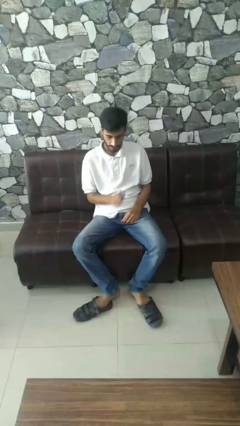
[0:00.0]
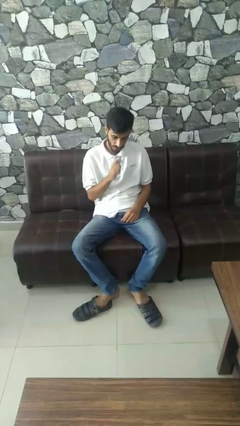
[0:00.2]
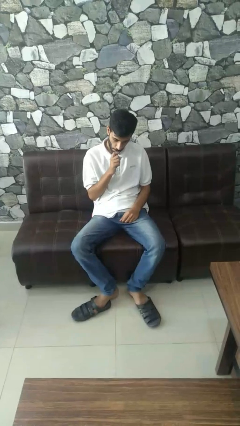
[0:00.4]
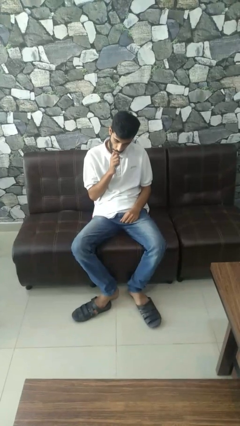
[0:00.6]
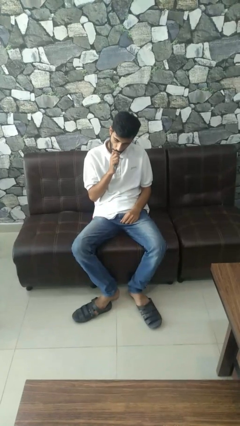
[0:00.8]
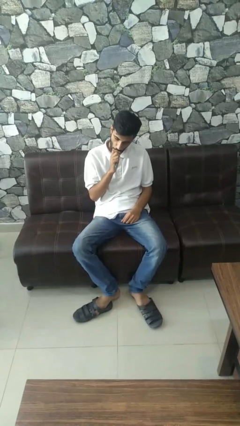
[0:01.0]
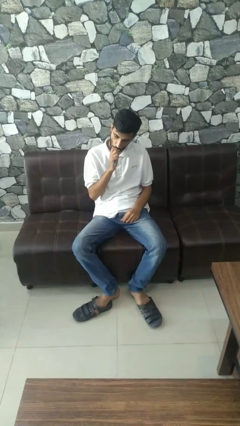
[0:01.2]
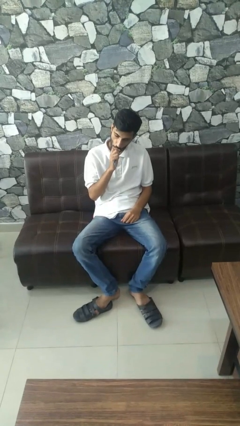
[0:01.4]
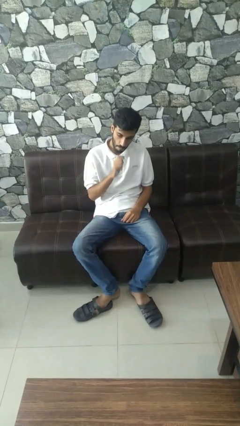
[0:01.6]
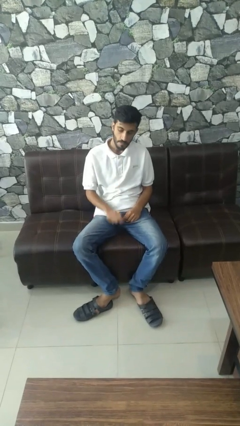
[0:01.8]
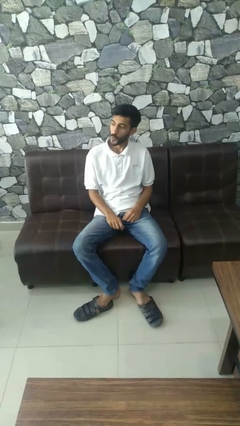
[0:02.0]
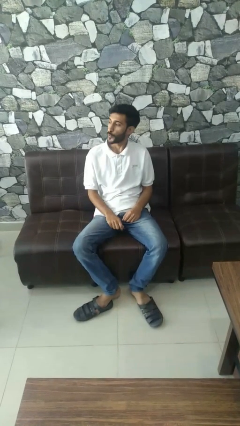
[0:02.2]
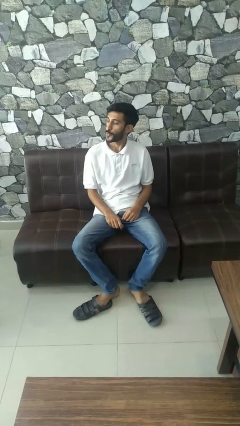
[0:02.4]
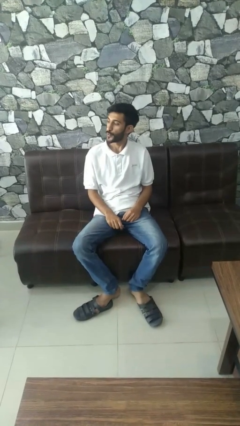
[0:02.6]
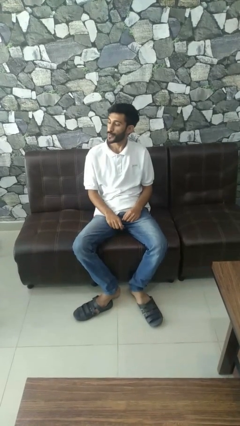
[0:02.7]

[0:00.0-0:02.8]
person vapes

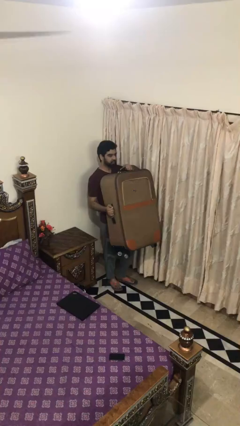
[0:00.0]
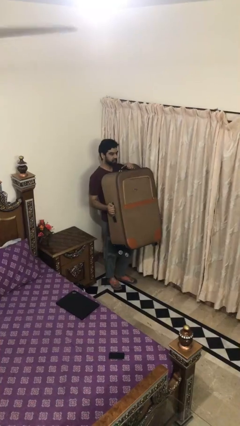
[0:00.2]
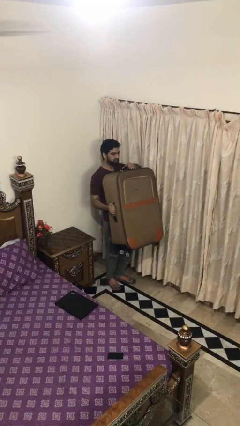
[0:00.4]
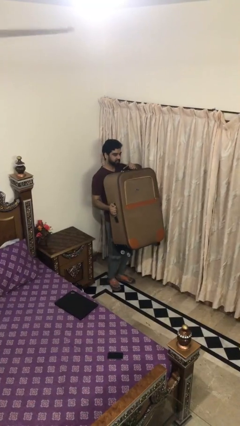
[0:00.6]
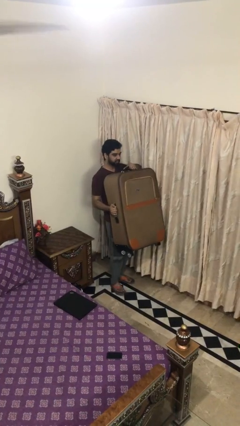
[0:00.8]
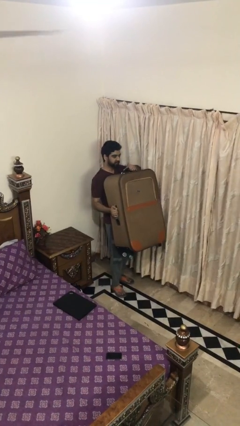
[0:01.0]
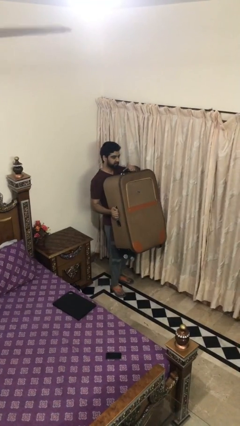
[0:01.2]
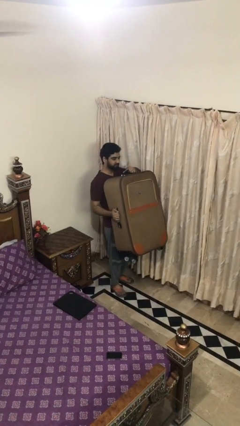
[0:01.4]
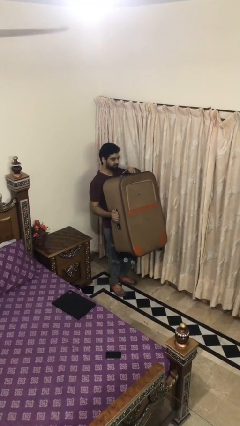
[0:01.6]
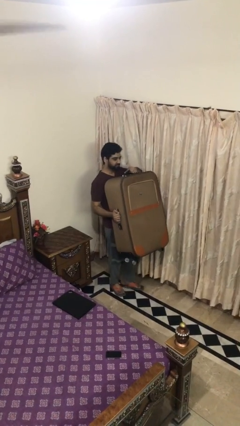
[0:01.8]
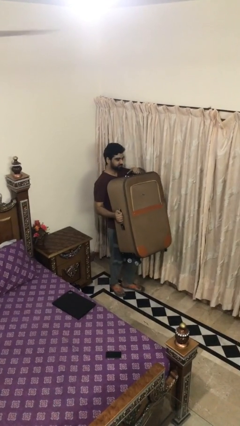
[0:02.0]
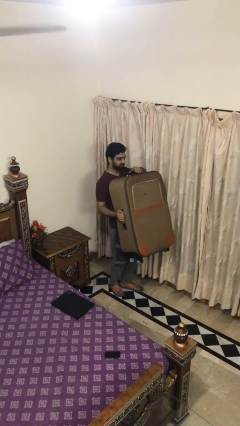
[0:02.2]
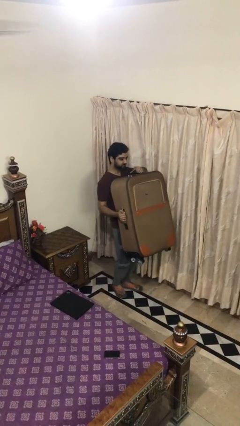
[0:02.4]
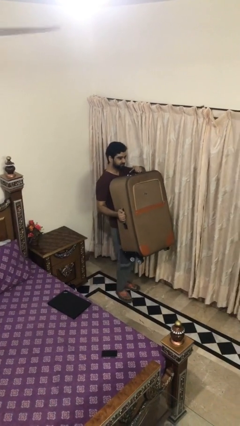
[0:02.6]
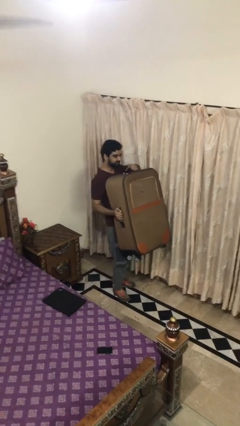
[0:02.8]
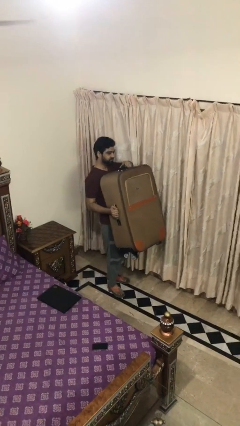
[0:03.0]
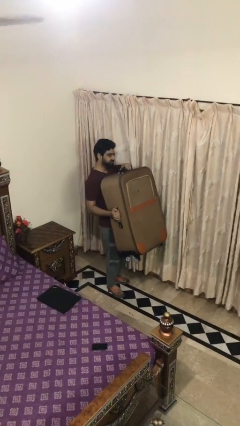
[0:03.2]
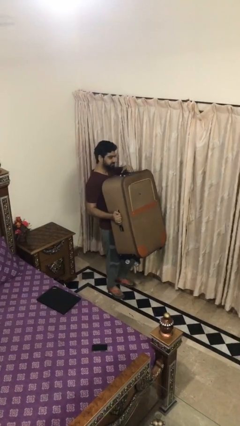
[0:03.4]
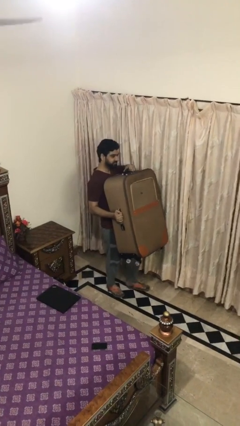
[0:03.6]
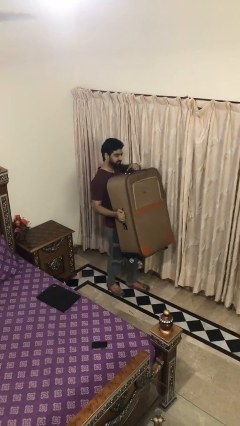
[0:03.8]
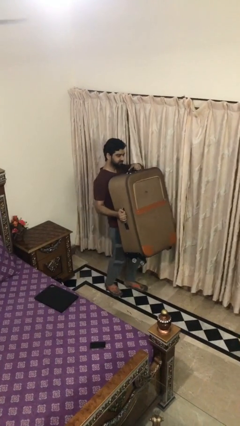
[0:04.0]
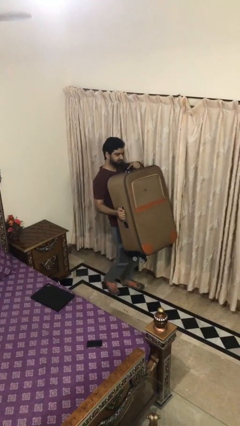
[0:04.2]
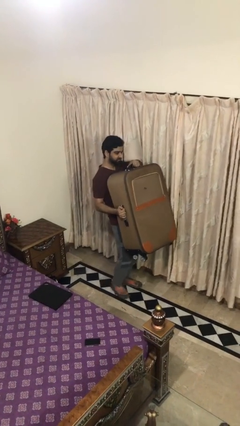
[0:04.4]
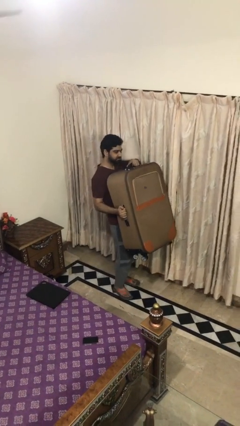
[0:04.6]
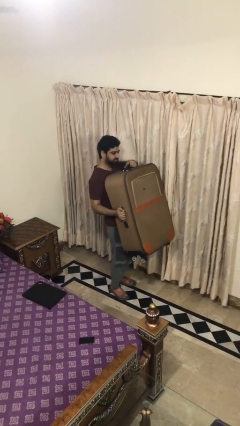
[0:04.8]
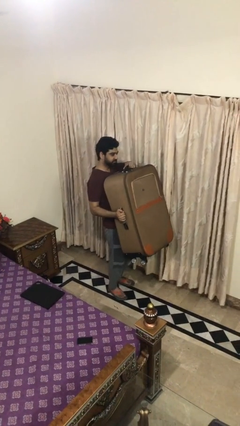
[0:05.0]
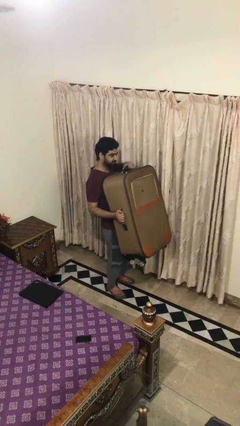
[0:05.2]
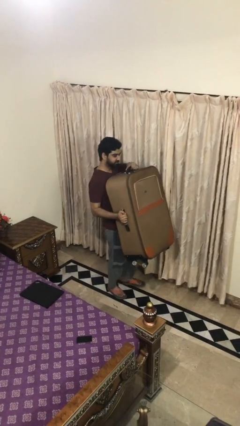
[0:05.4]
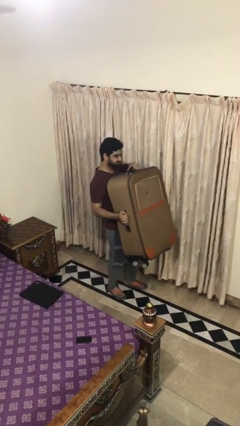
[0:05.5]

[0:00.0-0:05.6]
person carries heavy object

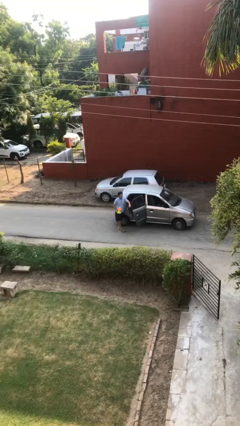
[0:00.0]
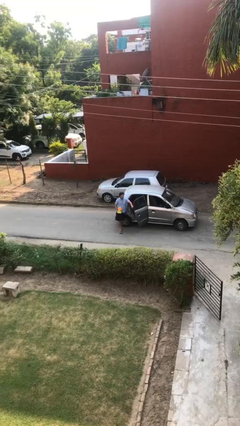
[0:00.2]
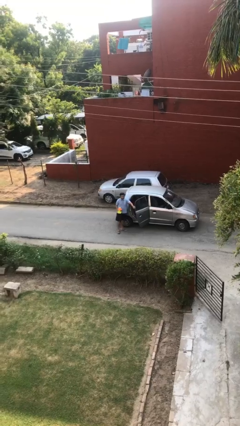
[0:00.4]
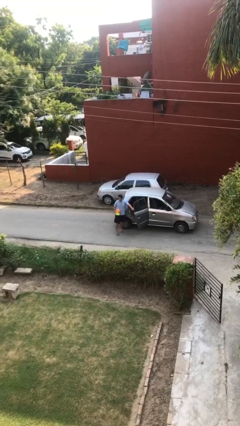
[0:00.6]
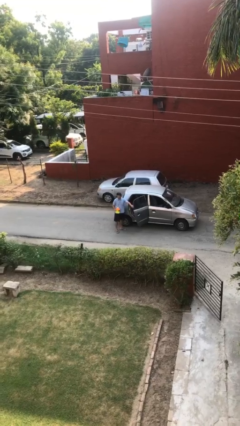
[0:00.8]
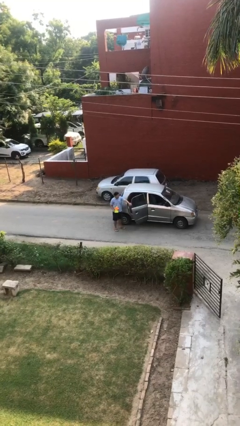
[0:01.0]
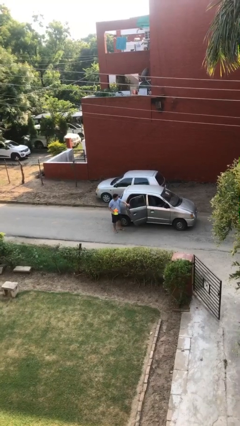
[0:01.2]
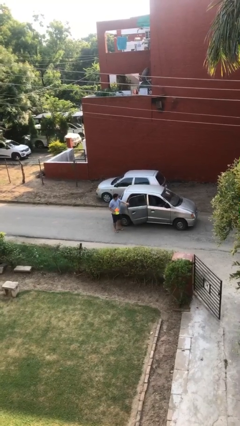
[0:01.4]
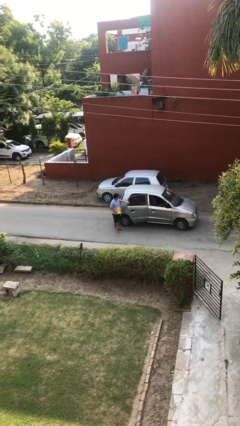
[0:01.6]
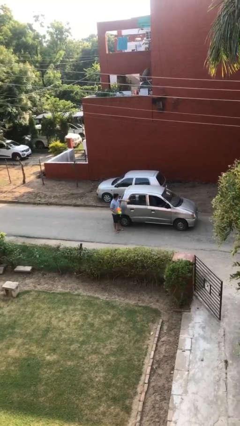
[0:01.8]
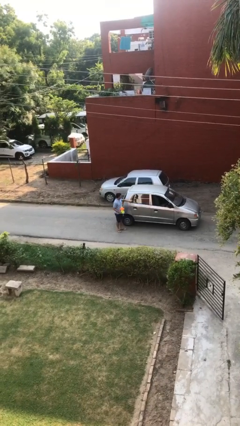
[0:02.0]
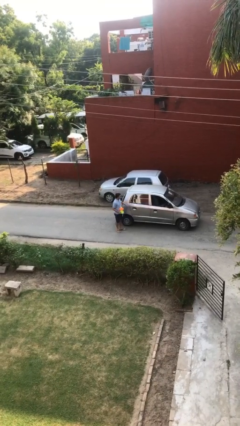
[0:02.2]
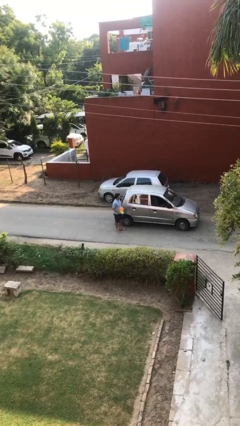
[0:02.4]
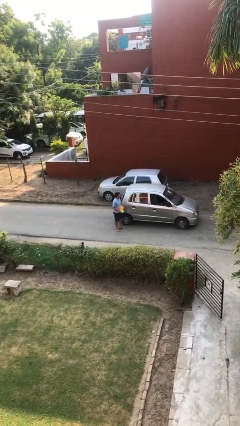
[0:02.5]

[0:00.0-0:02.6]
person closes car door

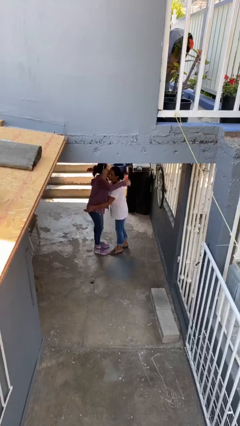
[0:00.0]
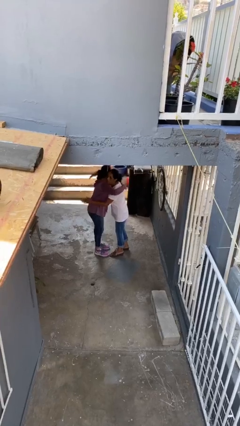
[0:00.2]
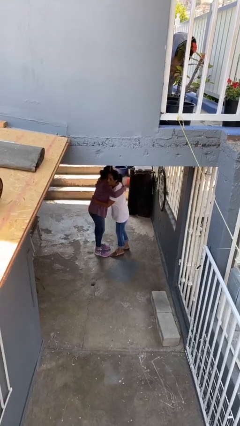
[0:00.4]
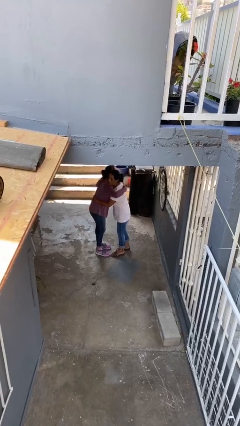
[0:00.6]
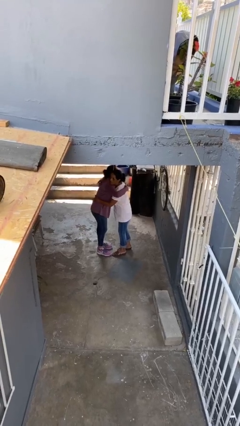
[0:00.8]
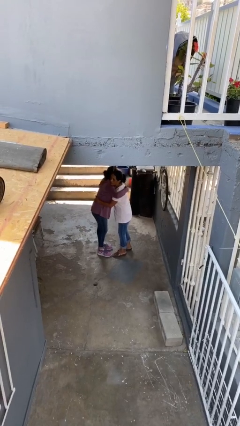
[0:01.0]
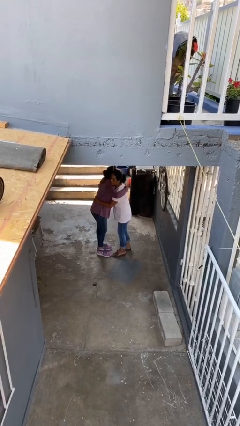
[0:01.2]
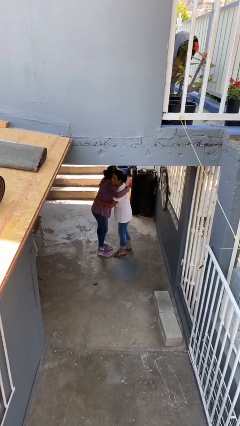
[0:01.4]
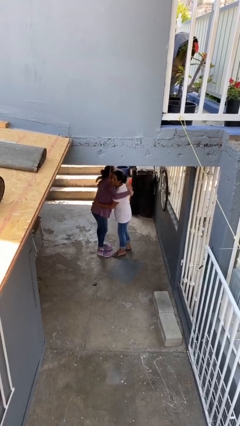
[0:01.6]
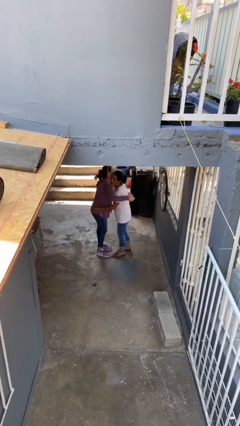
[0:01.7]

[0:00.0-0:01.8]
person embraces person

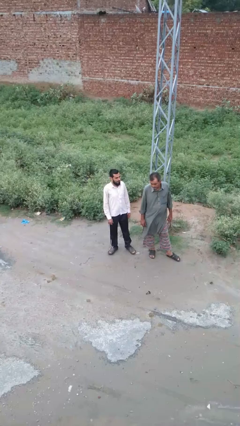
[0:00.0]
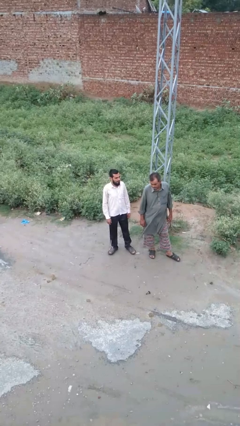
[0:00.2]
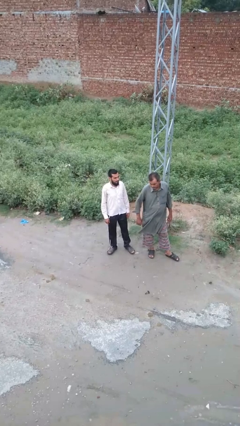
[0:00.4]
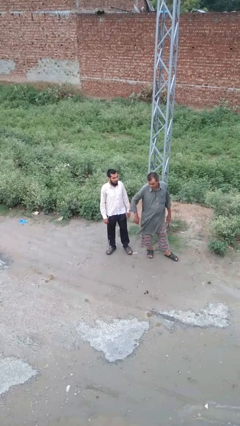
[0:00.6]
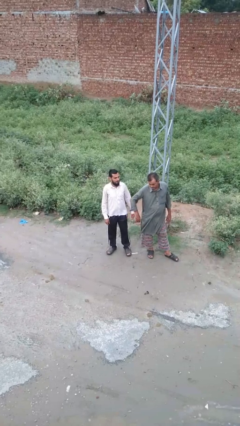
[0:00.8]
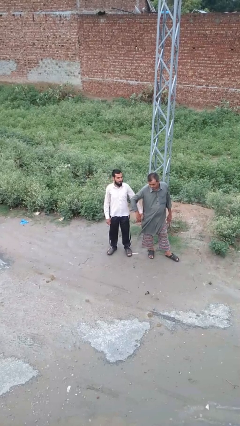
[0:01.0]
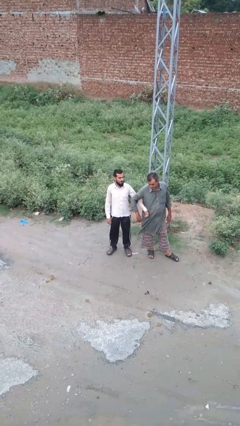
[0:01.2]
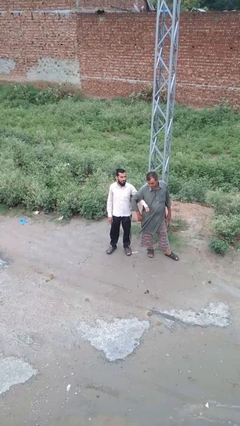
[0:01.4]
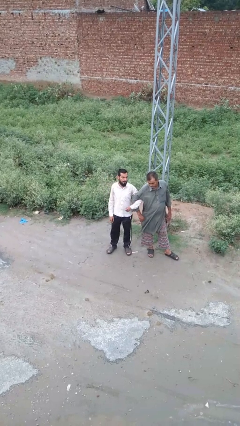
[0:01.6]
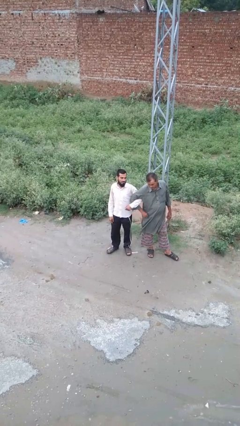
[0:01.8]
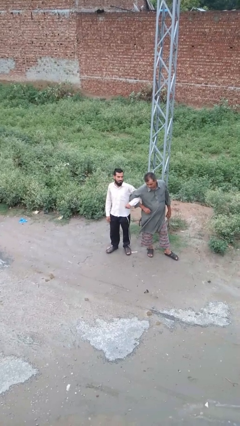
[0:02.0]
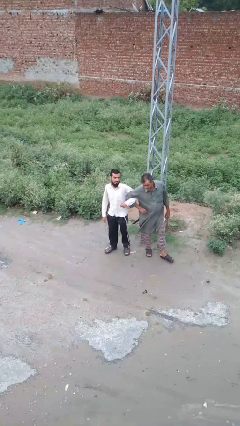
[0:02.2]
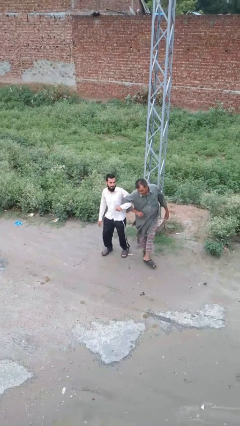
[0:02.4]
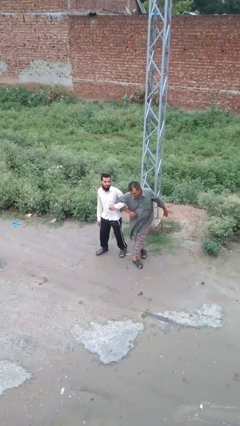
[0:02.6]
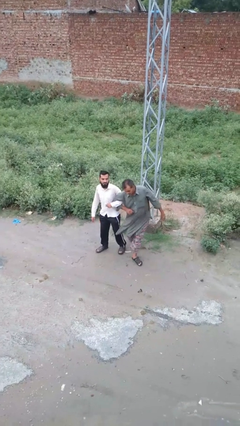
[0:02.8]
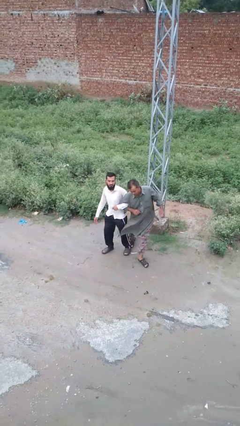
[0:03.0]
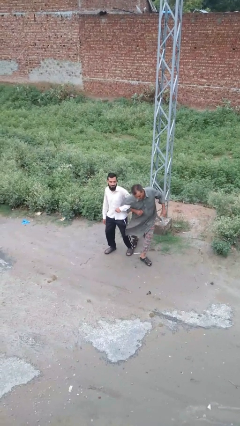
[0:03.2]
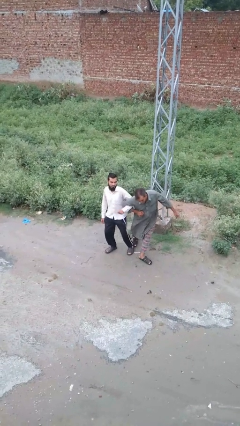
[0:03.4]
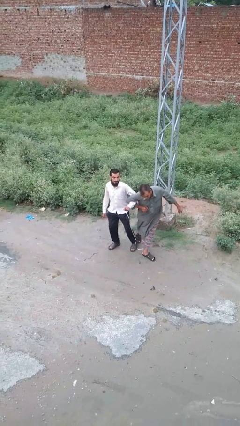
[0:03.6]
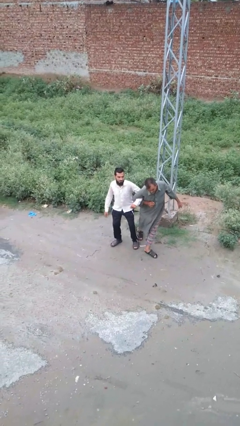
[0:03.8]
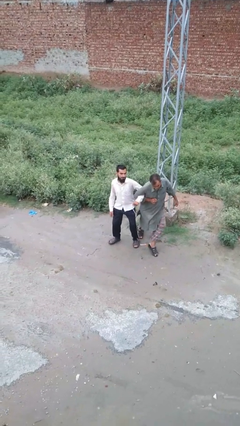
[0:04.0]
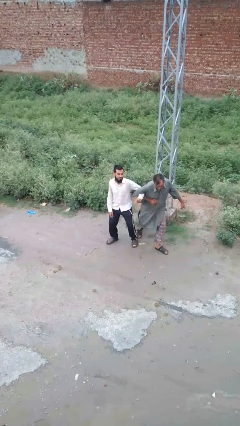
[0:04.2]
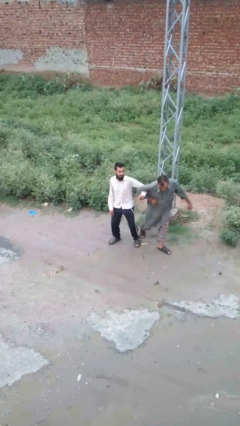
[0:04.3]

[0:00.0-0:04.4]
person grabs person by forearm

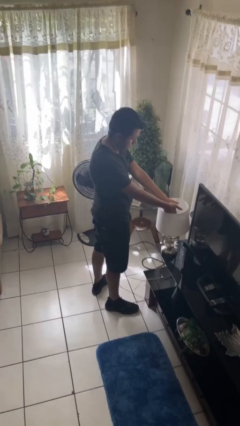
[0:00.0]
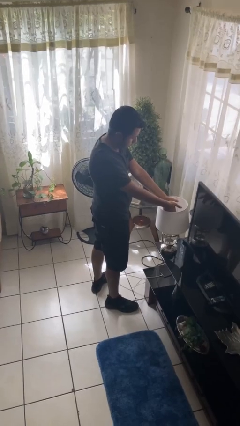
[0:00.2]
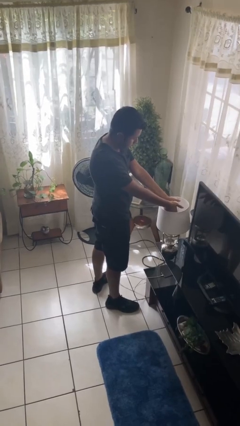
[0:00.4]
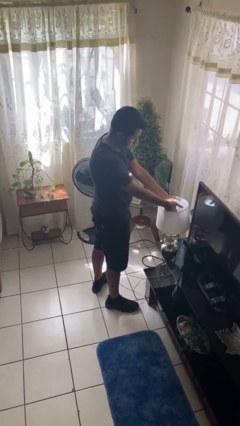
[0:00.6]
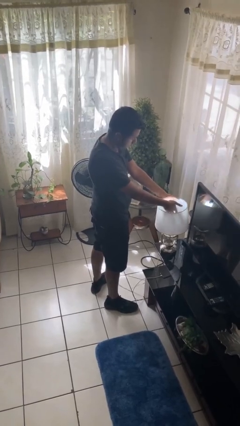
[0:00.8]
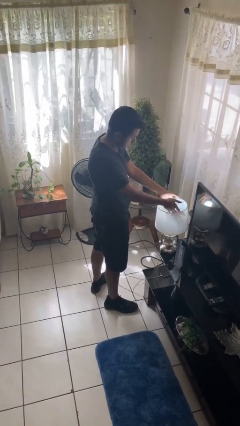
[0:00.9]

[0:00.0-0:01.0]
person turns on lamp
